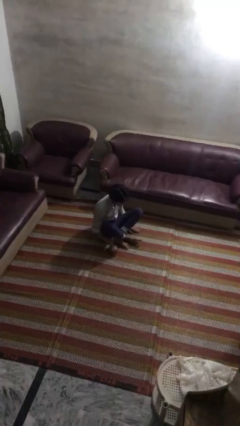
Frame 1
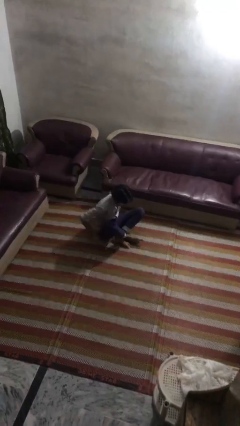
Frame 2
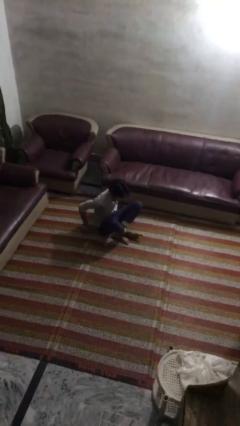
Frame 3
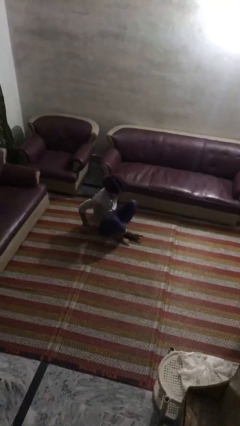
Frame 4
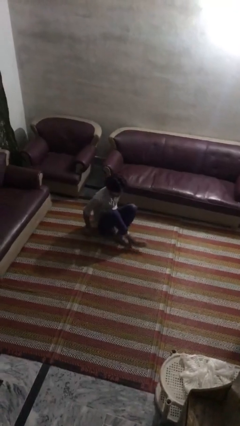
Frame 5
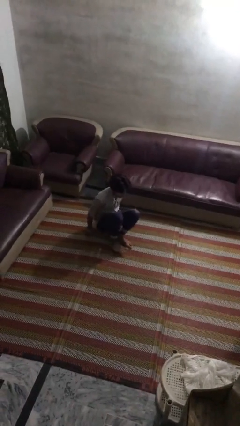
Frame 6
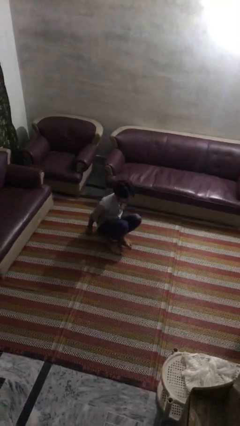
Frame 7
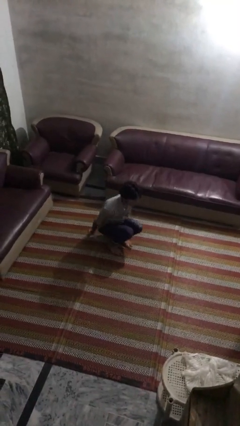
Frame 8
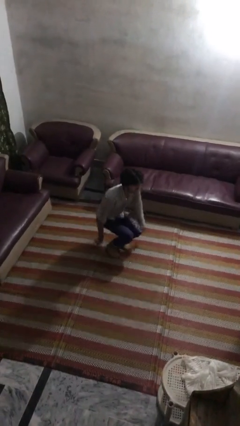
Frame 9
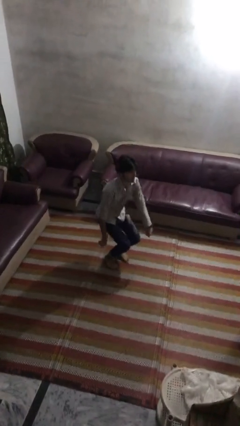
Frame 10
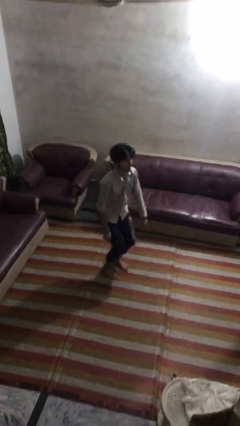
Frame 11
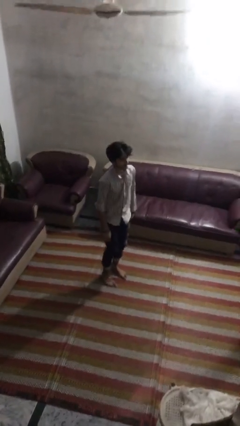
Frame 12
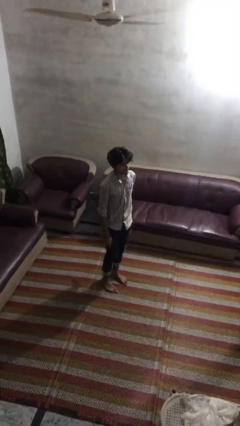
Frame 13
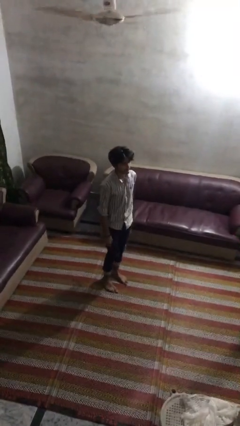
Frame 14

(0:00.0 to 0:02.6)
person stands up from floor

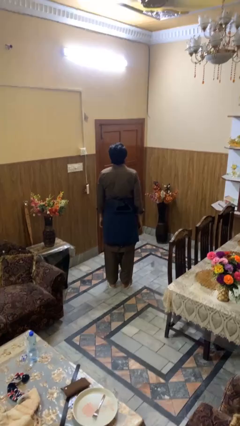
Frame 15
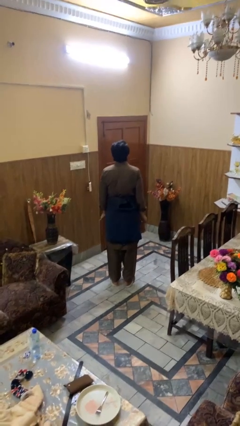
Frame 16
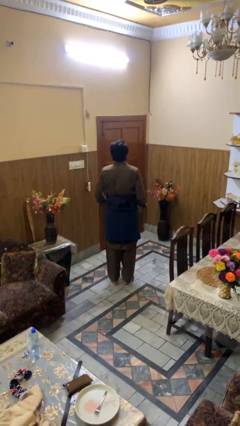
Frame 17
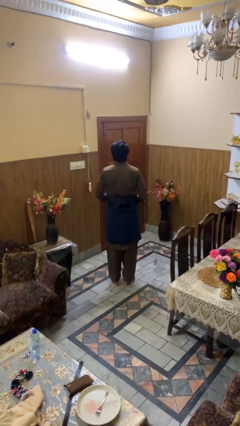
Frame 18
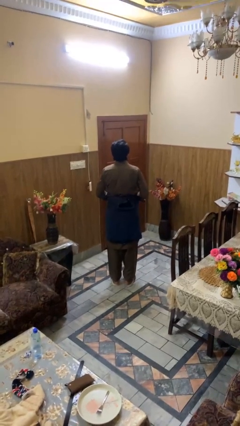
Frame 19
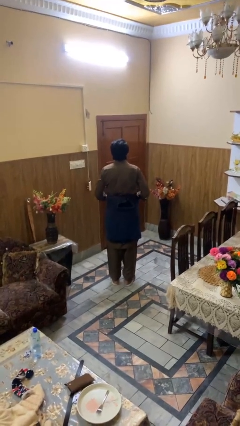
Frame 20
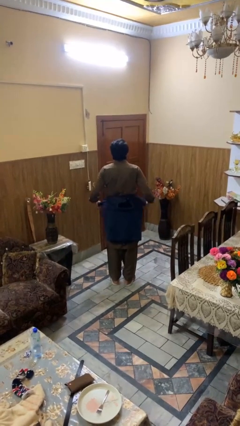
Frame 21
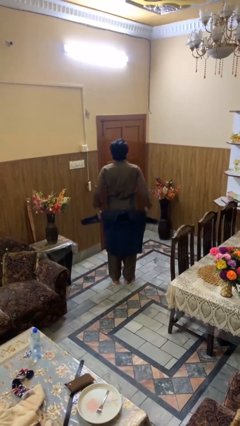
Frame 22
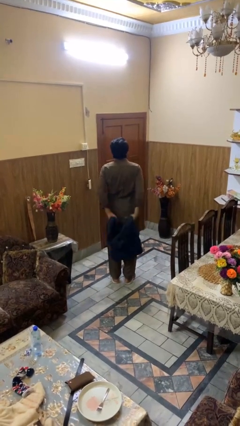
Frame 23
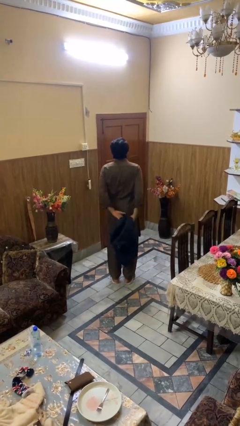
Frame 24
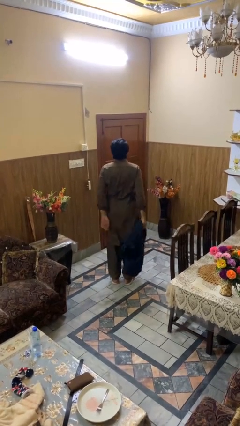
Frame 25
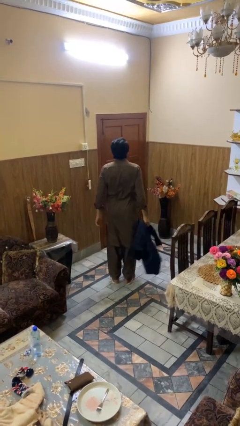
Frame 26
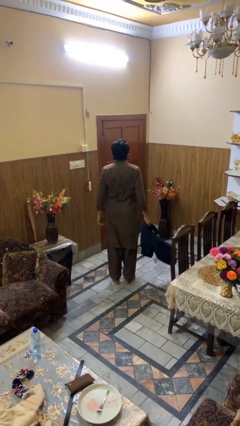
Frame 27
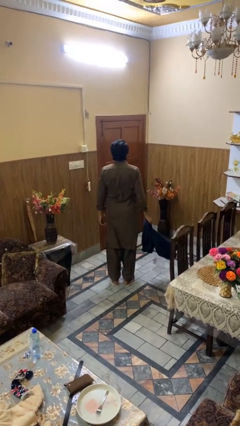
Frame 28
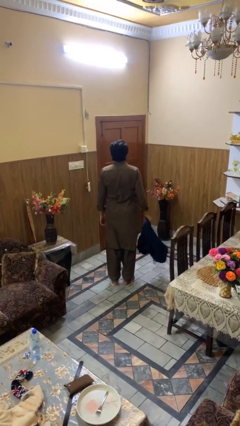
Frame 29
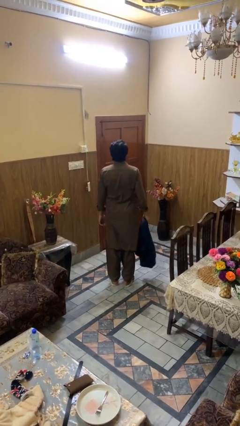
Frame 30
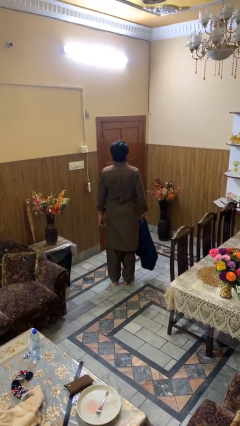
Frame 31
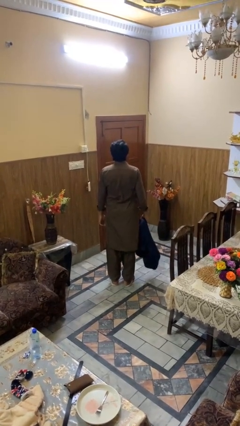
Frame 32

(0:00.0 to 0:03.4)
person unties jacket around waist

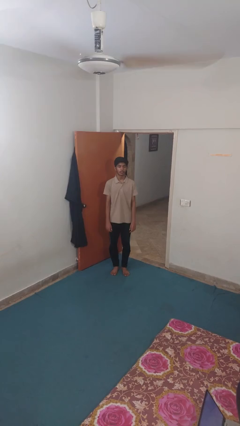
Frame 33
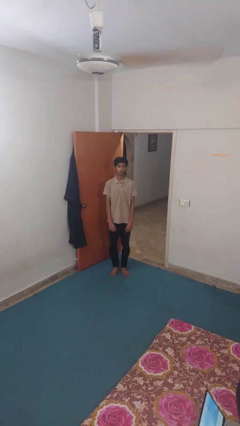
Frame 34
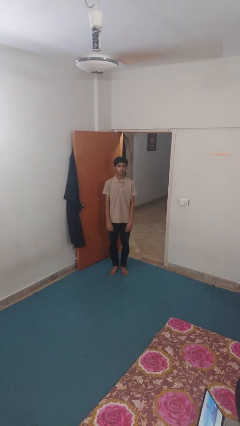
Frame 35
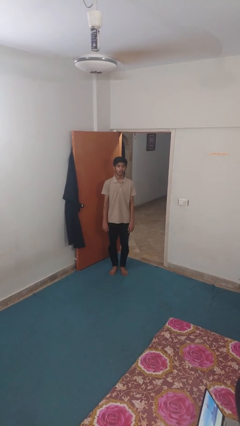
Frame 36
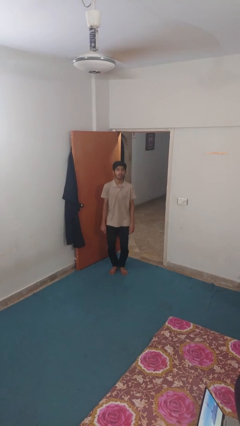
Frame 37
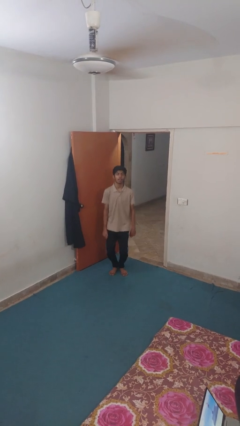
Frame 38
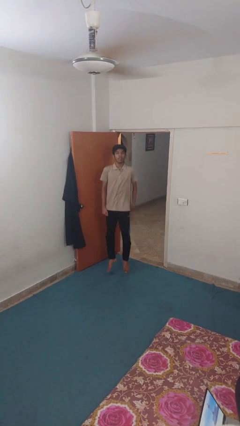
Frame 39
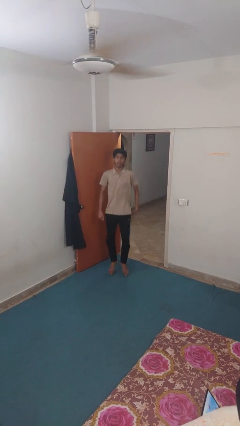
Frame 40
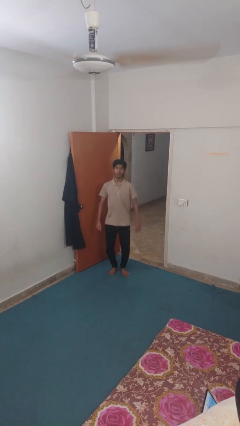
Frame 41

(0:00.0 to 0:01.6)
person jumps

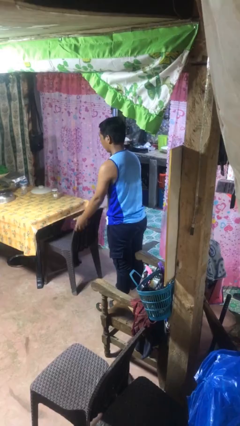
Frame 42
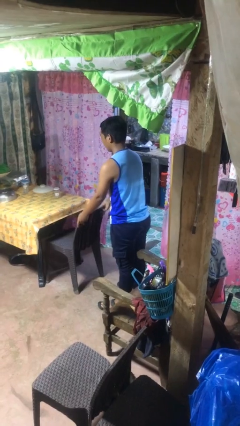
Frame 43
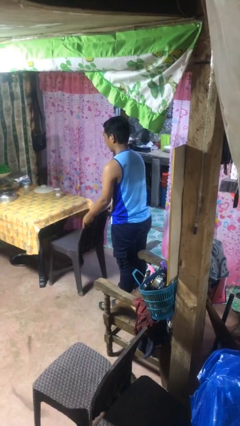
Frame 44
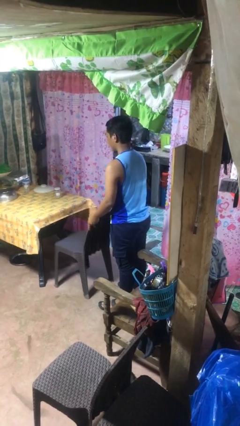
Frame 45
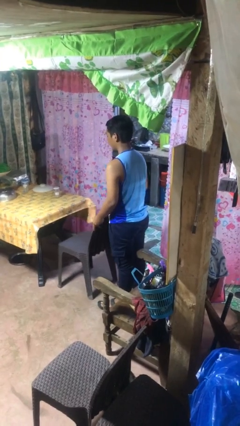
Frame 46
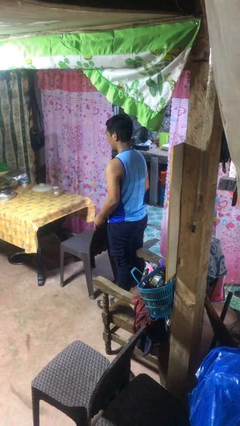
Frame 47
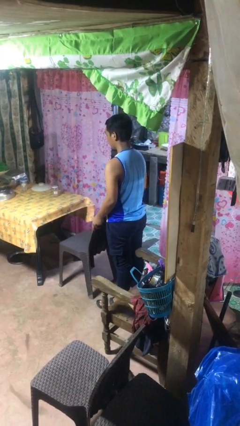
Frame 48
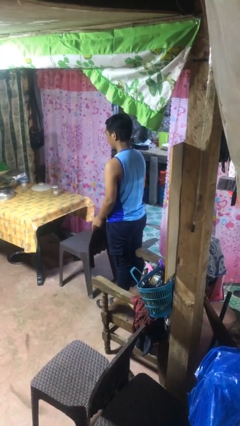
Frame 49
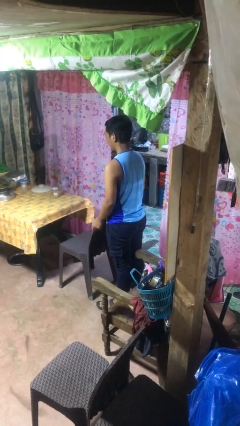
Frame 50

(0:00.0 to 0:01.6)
person pulls out chair

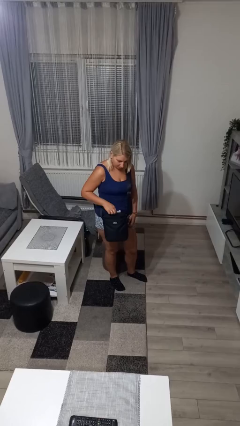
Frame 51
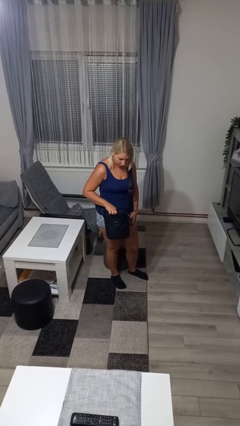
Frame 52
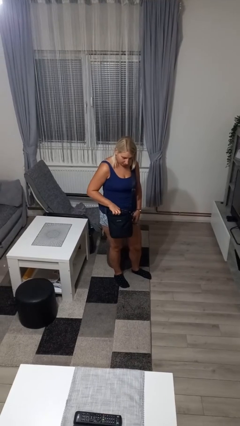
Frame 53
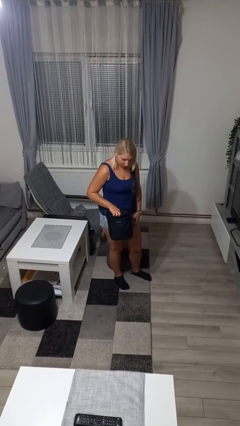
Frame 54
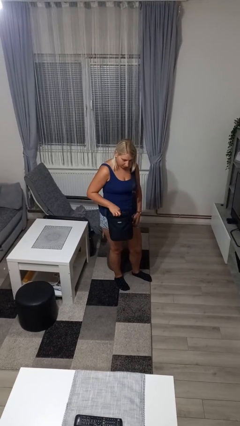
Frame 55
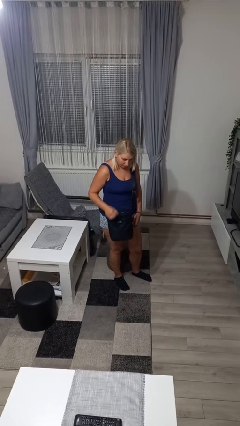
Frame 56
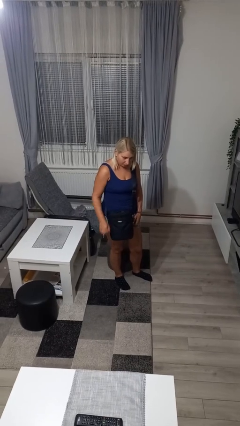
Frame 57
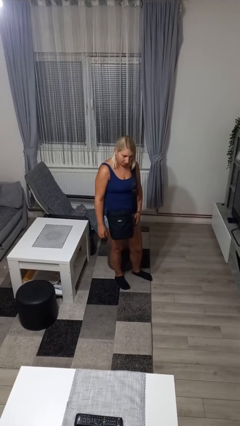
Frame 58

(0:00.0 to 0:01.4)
person puts object into purse

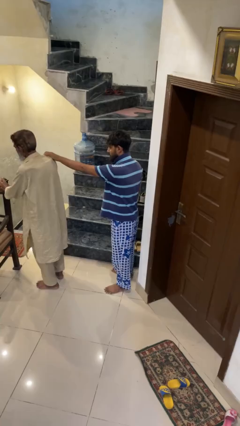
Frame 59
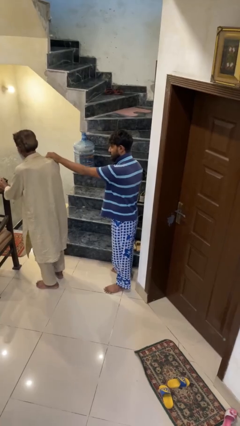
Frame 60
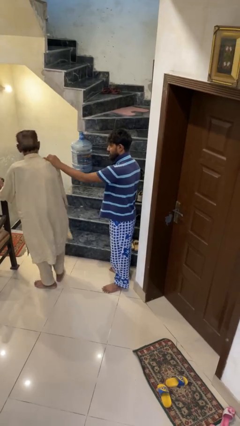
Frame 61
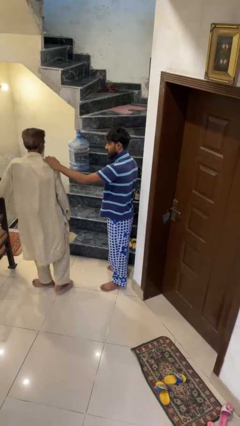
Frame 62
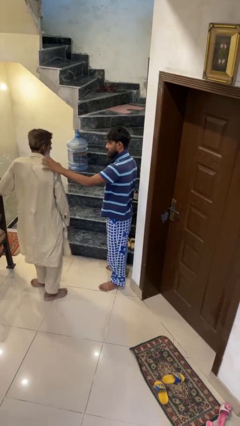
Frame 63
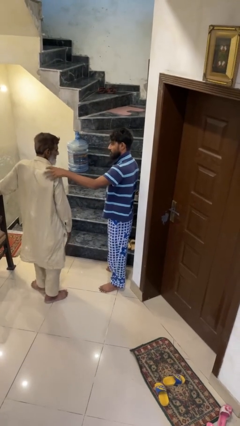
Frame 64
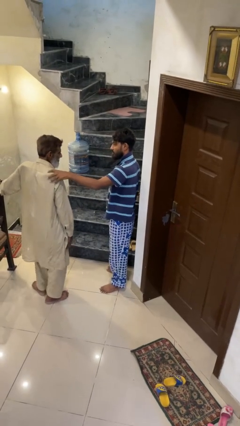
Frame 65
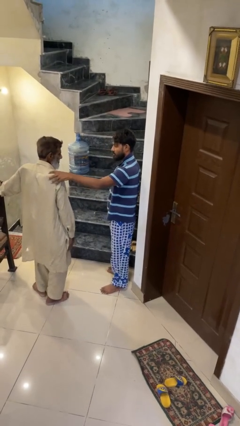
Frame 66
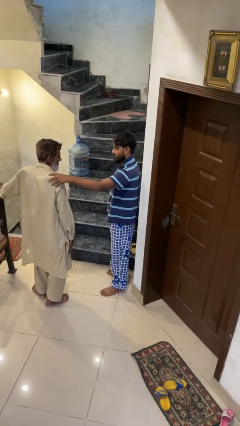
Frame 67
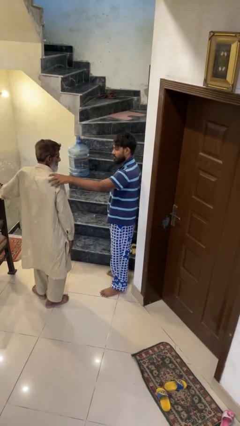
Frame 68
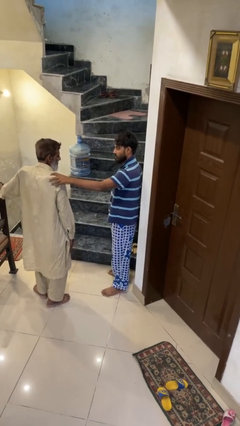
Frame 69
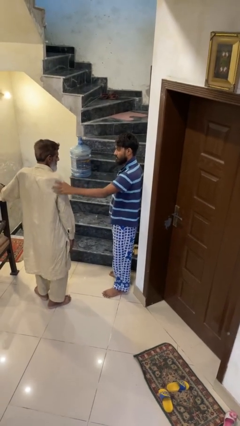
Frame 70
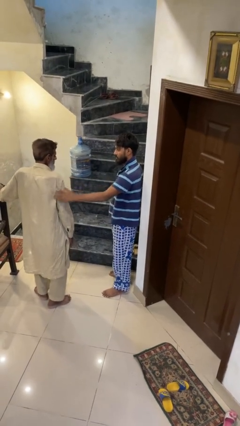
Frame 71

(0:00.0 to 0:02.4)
person spins person around

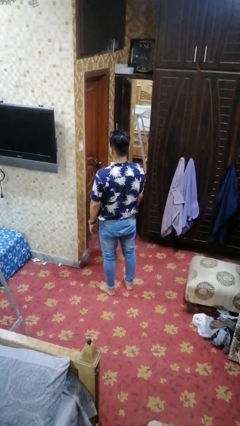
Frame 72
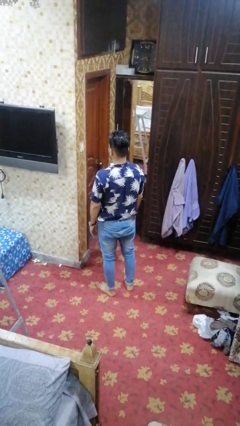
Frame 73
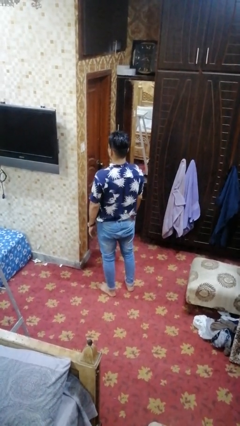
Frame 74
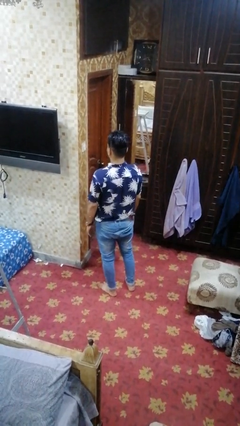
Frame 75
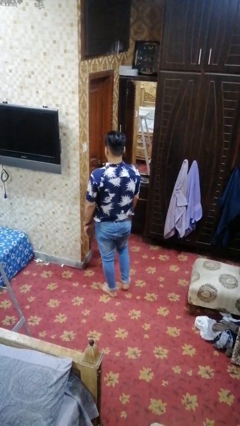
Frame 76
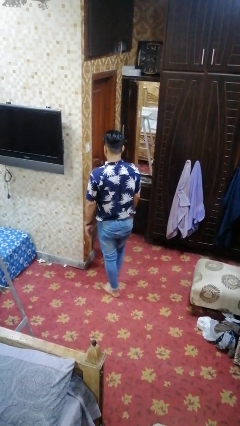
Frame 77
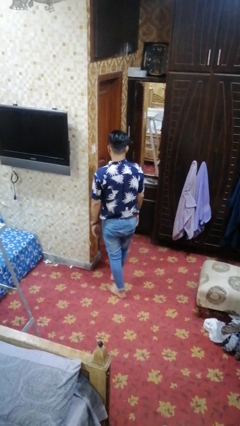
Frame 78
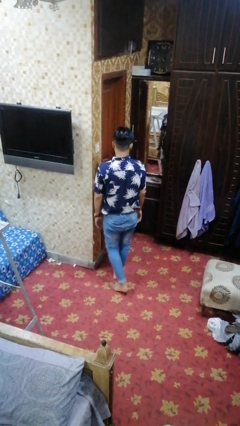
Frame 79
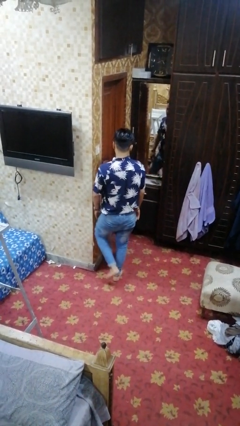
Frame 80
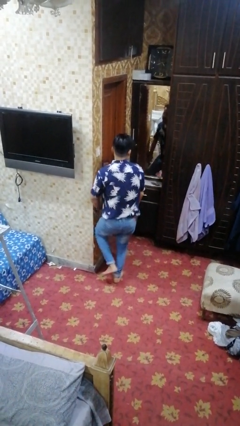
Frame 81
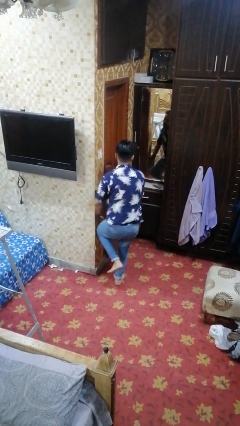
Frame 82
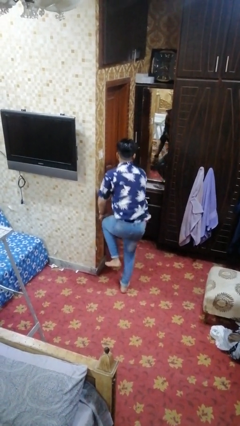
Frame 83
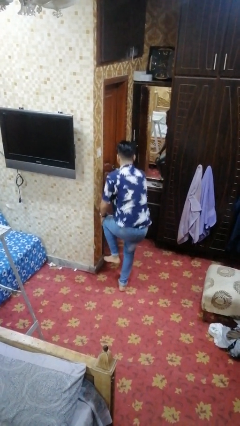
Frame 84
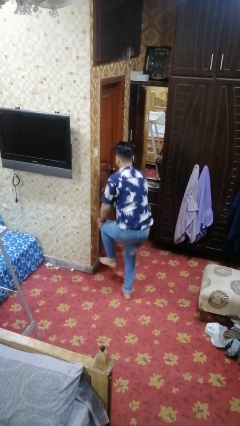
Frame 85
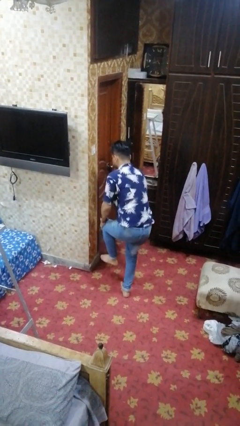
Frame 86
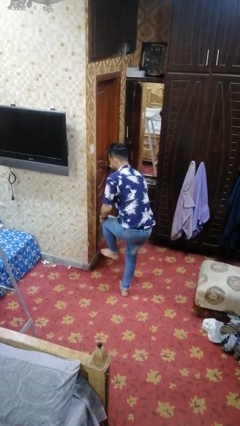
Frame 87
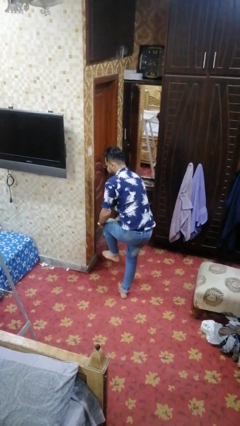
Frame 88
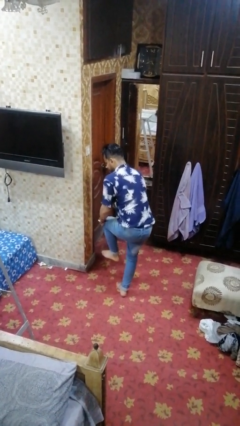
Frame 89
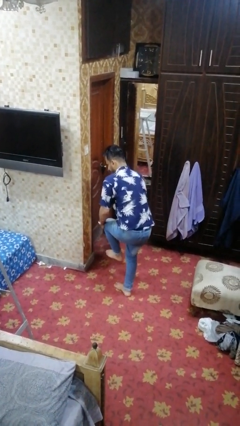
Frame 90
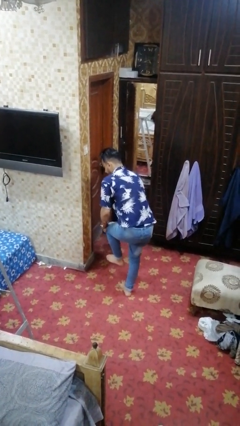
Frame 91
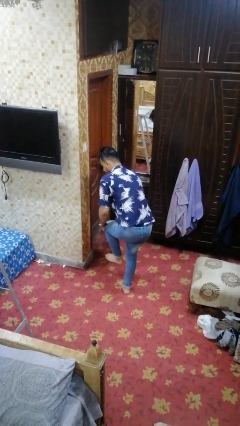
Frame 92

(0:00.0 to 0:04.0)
person trips on object on floor

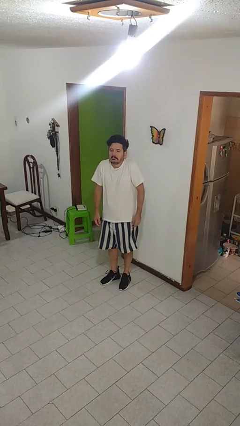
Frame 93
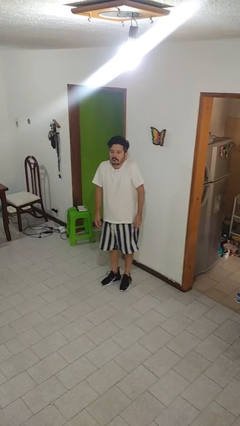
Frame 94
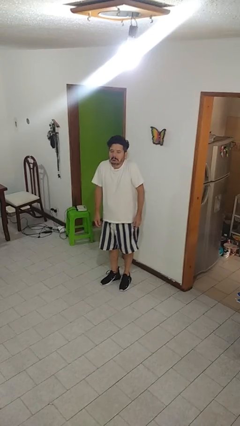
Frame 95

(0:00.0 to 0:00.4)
person shrugs
